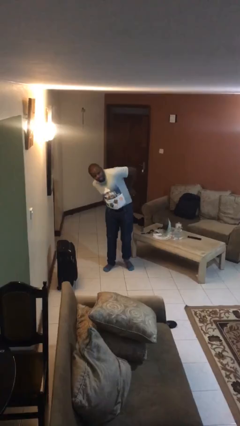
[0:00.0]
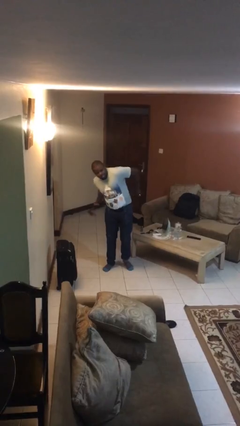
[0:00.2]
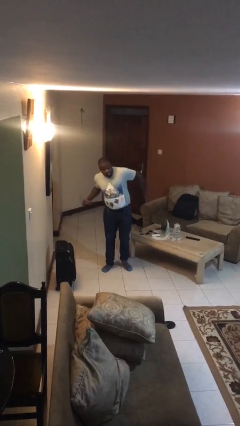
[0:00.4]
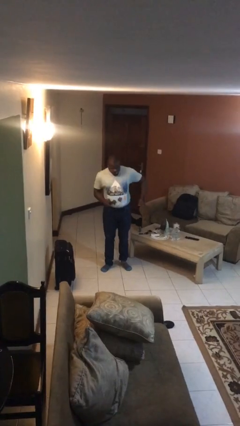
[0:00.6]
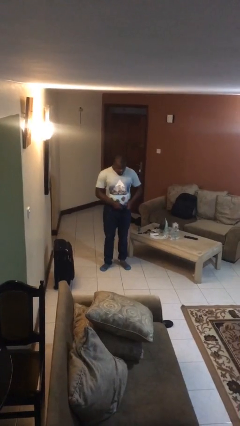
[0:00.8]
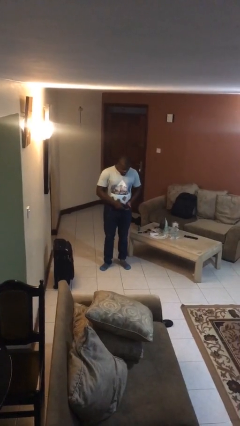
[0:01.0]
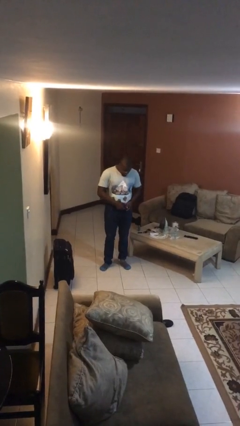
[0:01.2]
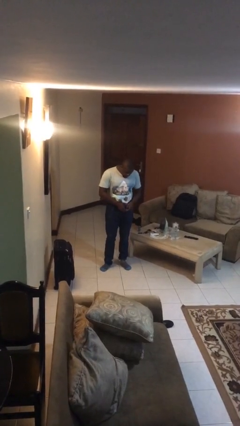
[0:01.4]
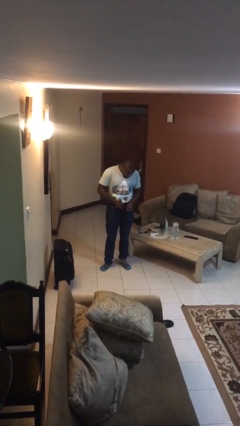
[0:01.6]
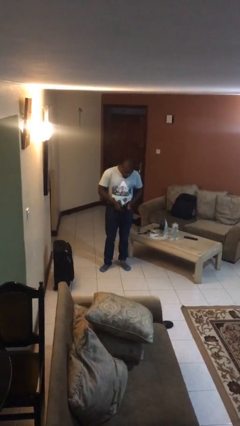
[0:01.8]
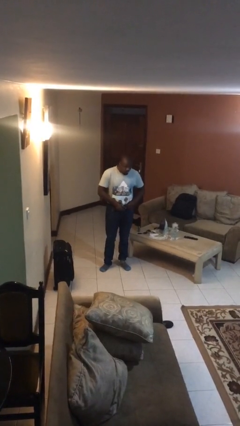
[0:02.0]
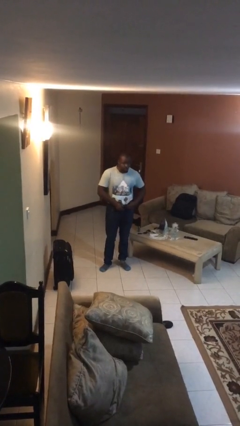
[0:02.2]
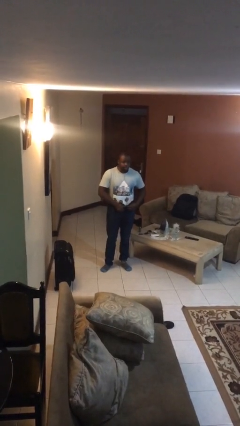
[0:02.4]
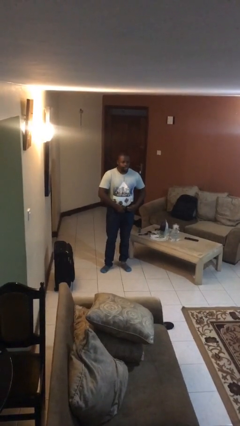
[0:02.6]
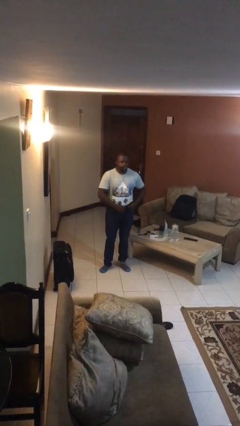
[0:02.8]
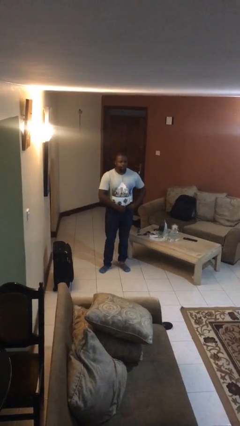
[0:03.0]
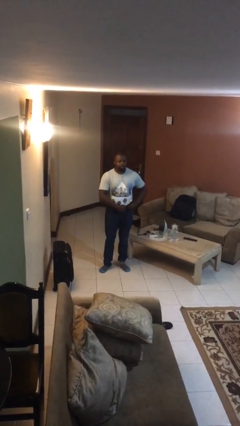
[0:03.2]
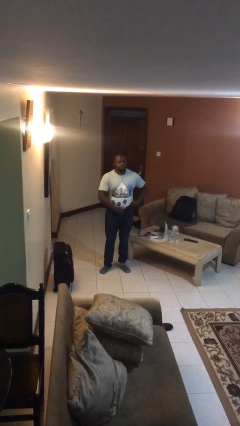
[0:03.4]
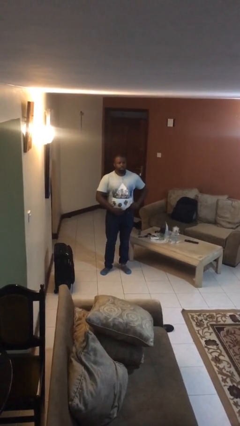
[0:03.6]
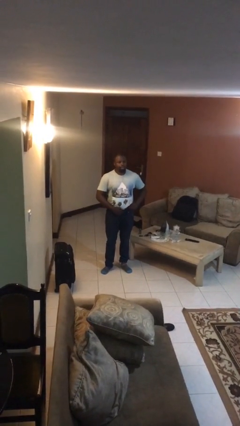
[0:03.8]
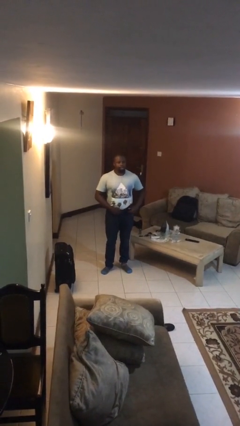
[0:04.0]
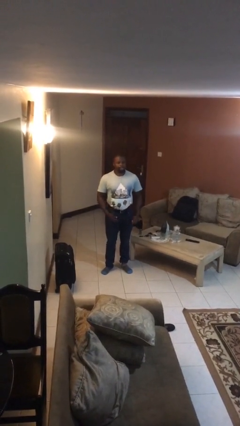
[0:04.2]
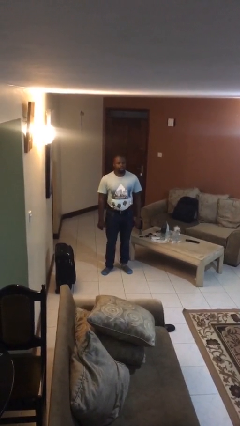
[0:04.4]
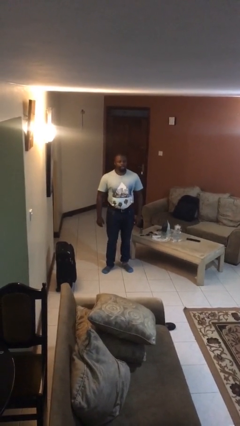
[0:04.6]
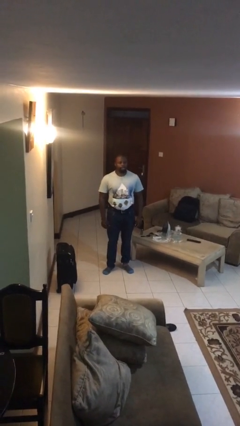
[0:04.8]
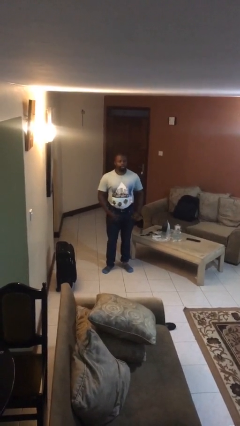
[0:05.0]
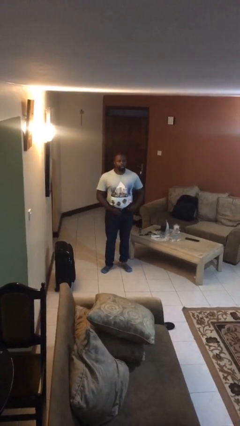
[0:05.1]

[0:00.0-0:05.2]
person puts on belt

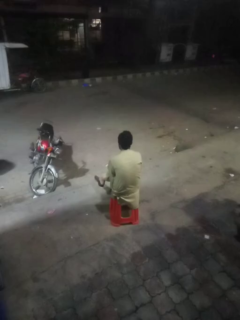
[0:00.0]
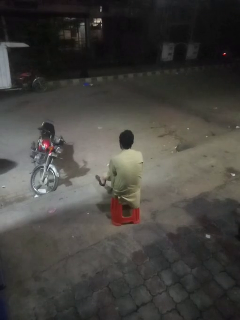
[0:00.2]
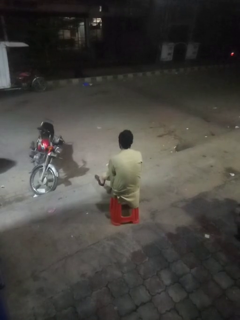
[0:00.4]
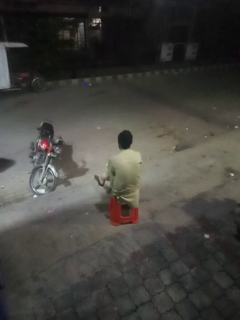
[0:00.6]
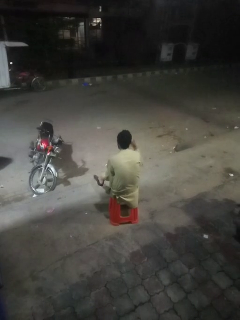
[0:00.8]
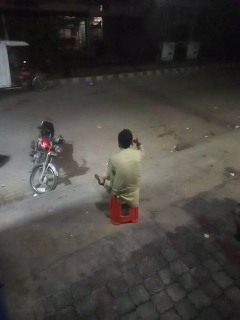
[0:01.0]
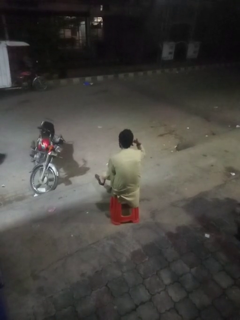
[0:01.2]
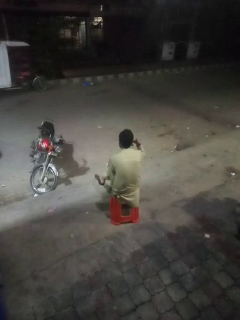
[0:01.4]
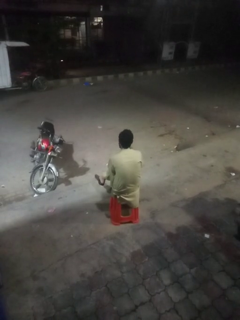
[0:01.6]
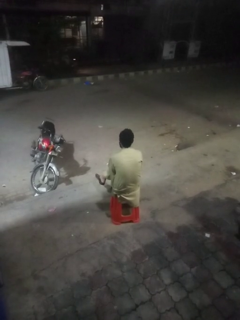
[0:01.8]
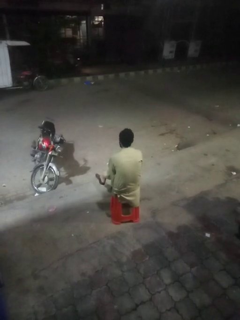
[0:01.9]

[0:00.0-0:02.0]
person gestures call me

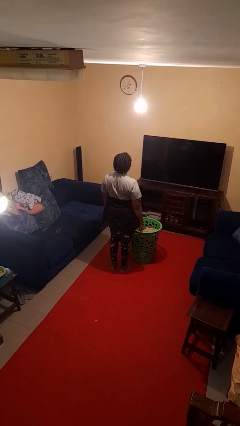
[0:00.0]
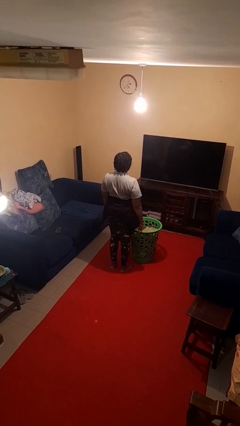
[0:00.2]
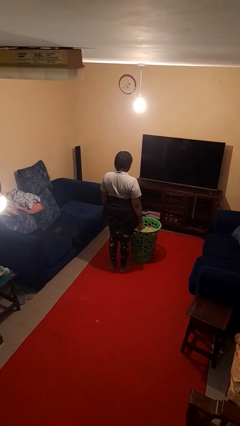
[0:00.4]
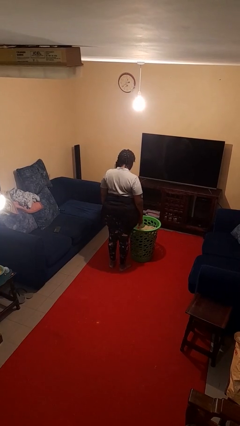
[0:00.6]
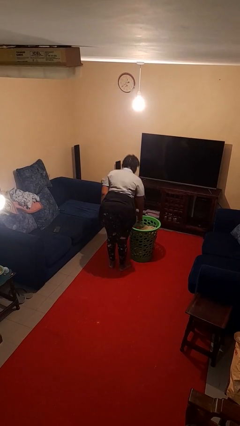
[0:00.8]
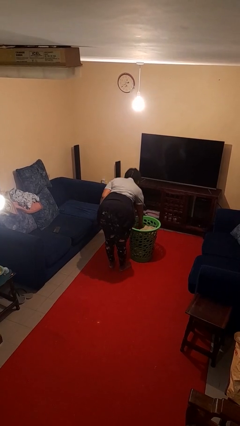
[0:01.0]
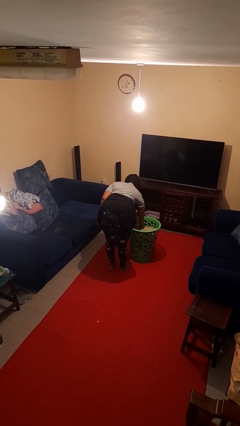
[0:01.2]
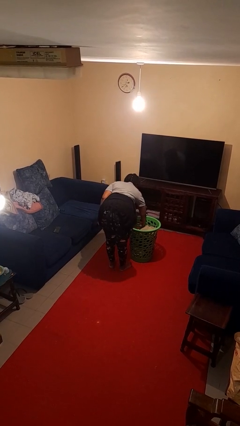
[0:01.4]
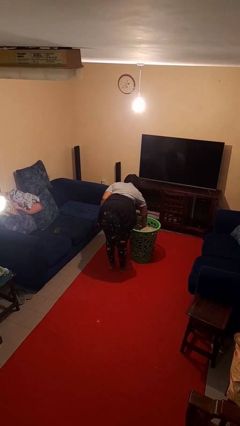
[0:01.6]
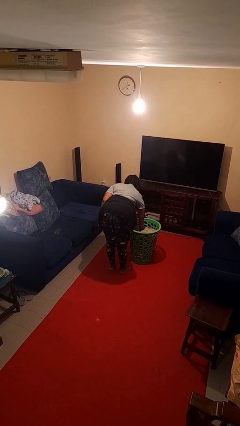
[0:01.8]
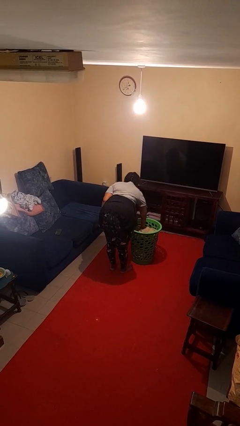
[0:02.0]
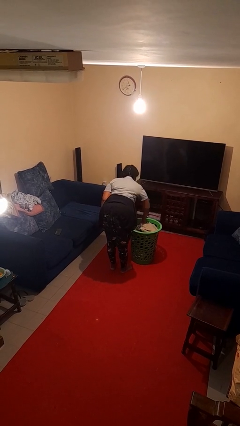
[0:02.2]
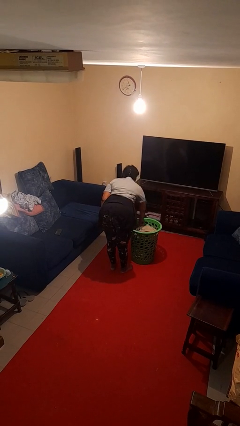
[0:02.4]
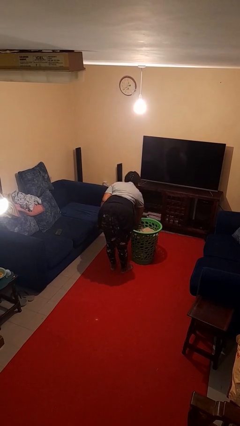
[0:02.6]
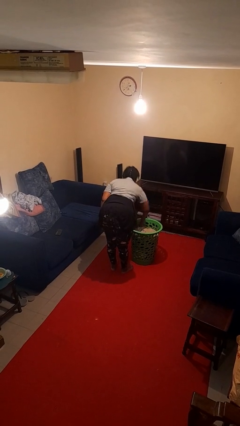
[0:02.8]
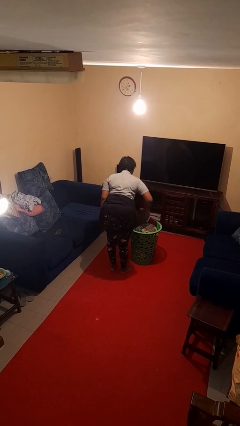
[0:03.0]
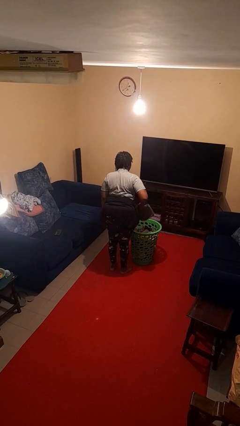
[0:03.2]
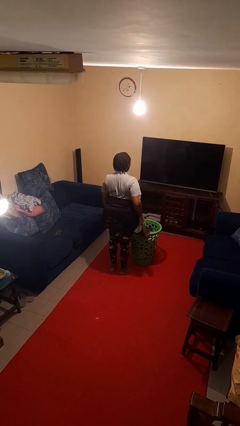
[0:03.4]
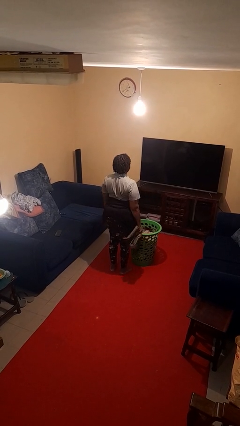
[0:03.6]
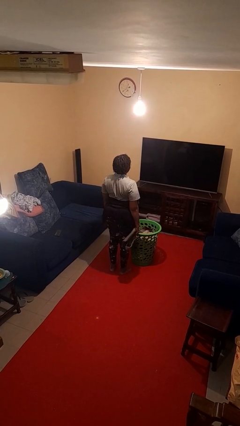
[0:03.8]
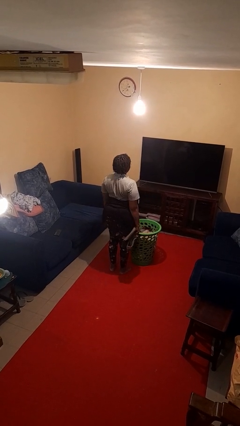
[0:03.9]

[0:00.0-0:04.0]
person takes object from basket

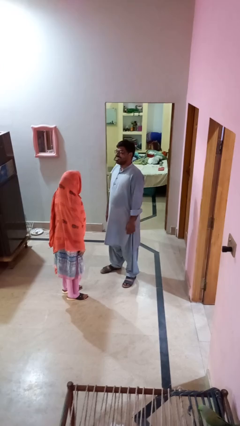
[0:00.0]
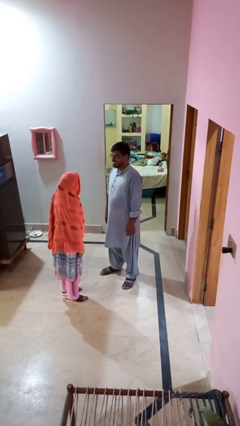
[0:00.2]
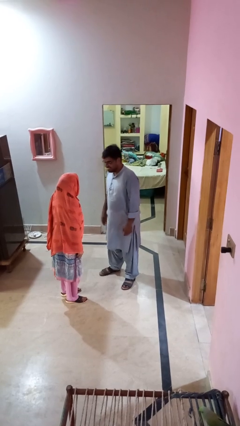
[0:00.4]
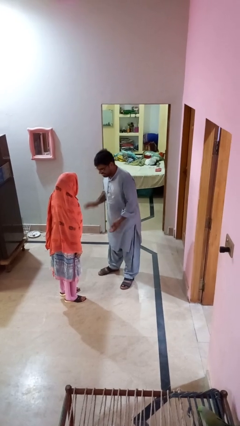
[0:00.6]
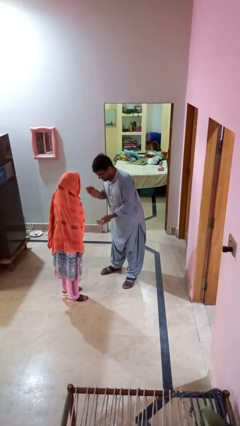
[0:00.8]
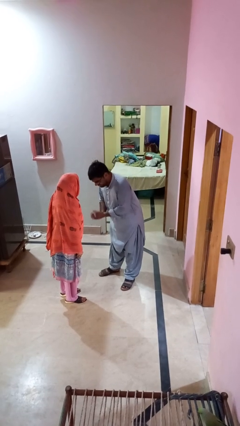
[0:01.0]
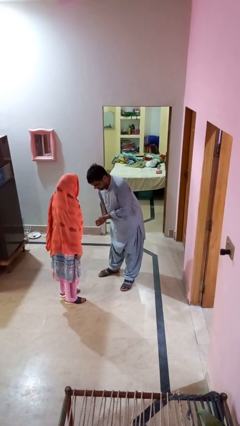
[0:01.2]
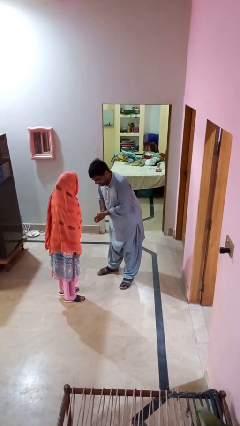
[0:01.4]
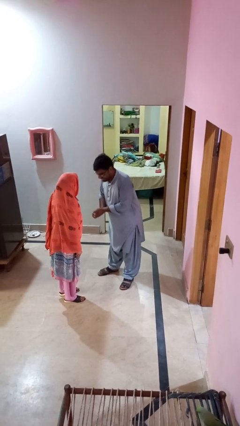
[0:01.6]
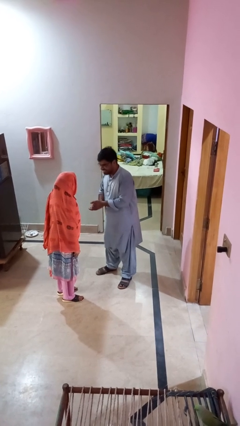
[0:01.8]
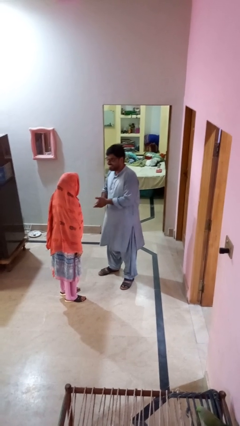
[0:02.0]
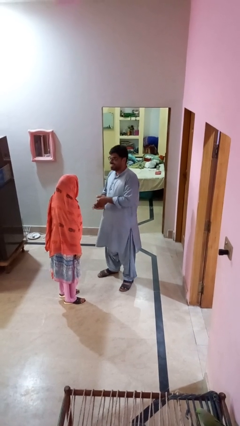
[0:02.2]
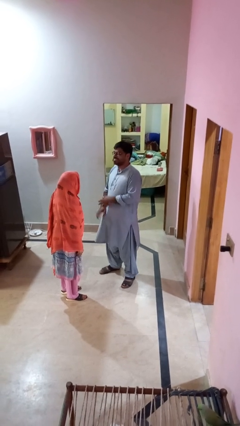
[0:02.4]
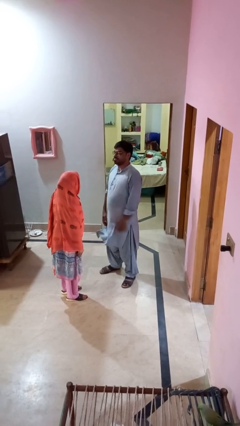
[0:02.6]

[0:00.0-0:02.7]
person laughs with person

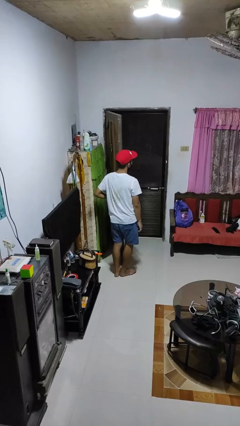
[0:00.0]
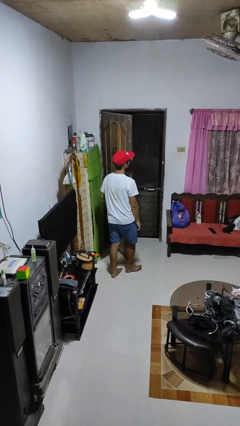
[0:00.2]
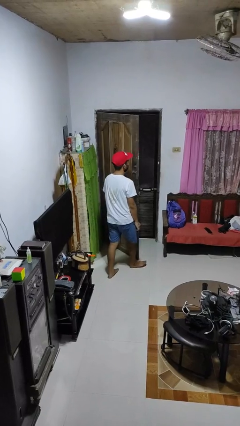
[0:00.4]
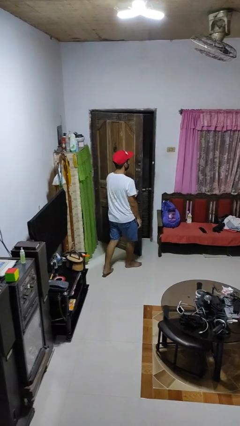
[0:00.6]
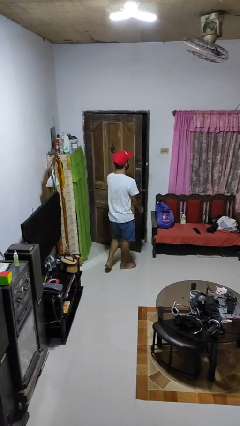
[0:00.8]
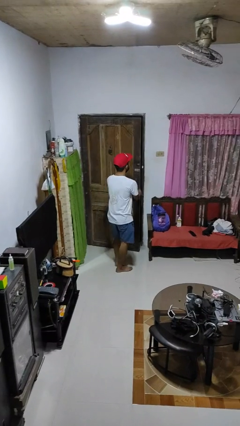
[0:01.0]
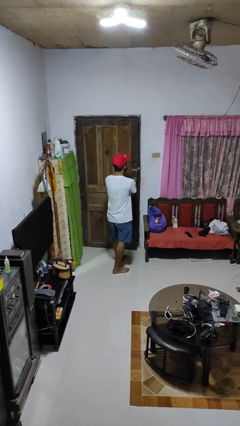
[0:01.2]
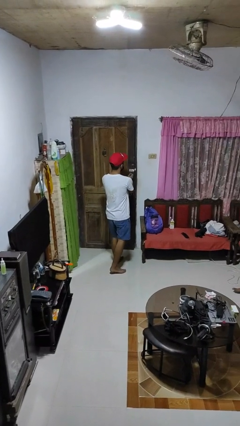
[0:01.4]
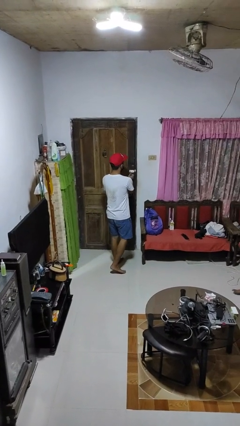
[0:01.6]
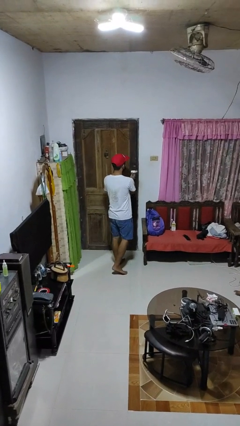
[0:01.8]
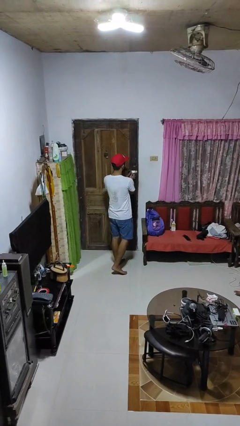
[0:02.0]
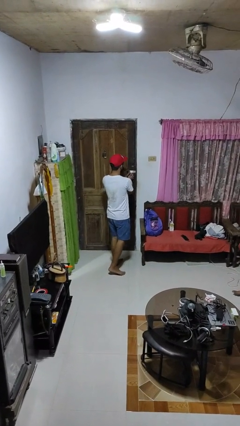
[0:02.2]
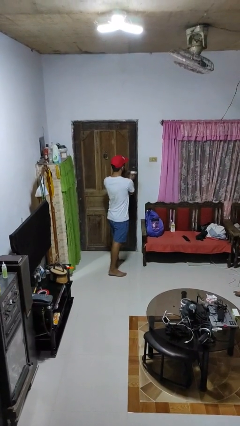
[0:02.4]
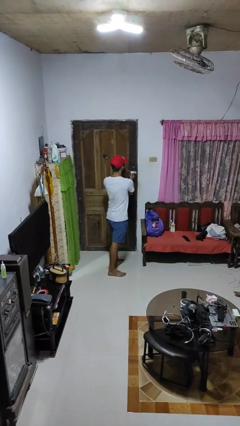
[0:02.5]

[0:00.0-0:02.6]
person closes facility door

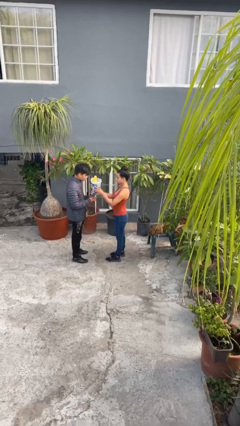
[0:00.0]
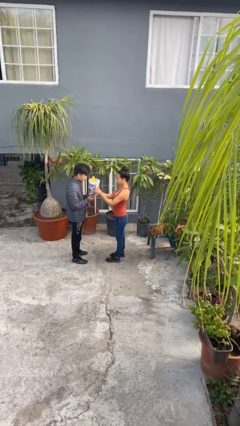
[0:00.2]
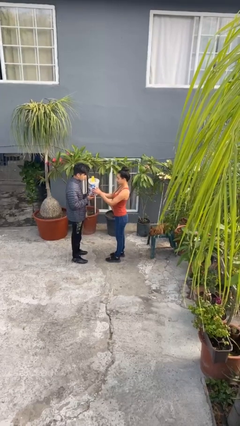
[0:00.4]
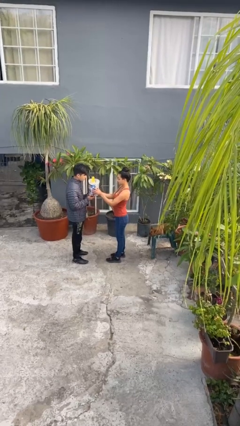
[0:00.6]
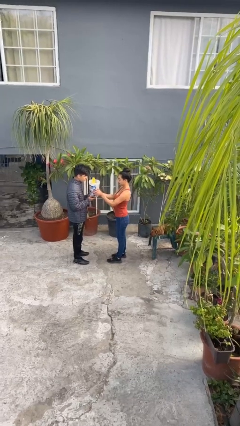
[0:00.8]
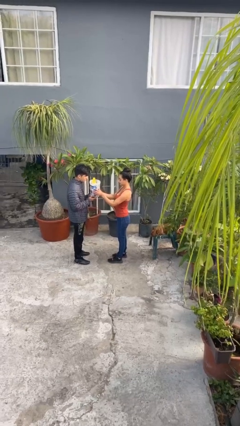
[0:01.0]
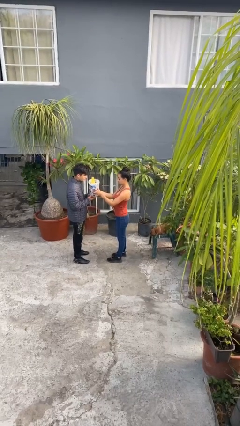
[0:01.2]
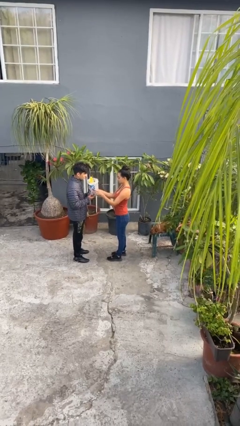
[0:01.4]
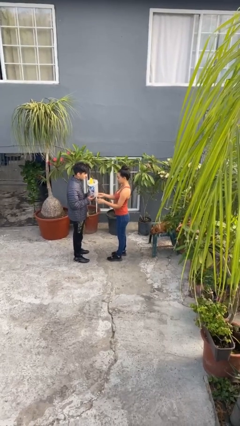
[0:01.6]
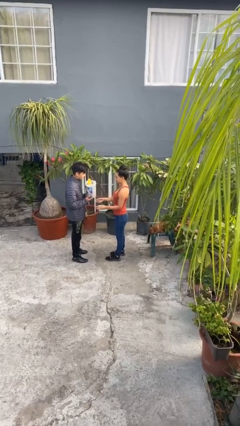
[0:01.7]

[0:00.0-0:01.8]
person transfers object to person
